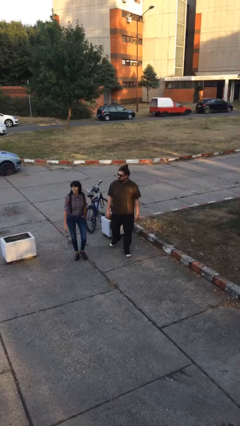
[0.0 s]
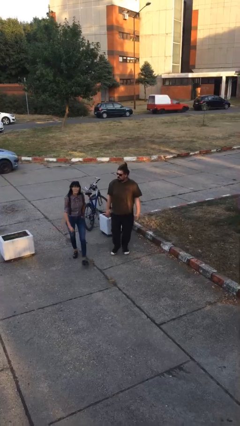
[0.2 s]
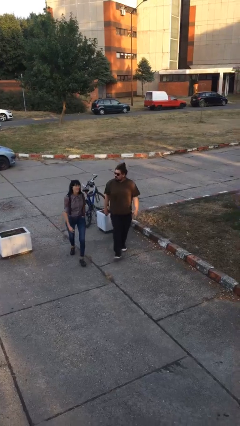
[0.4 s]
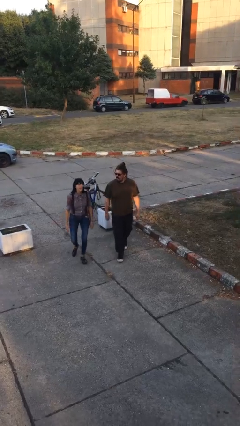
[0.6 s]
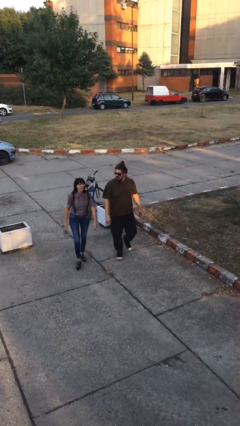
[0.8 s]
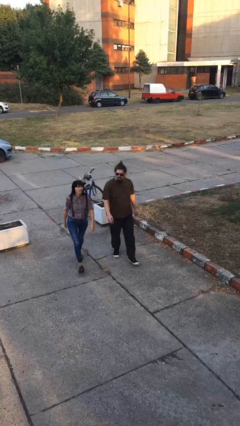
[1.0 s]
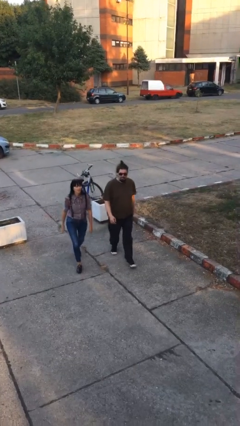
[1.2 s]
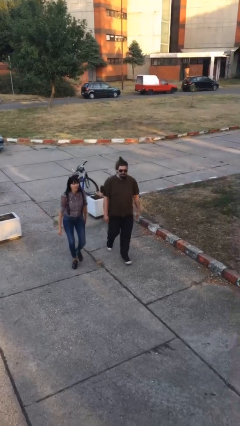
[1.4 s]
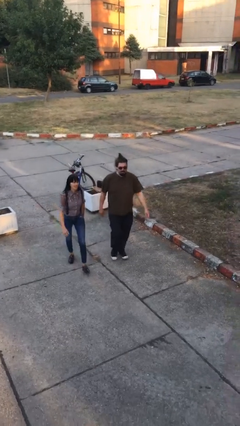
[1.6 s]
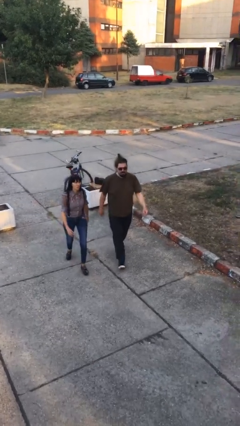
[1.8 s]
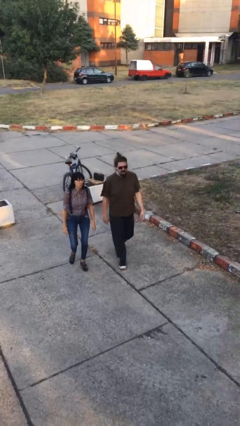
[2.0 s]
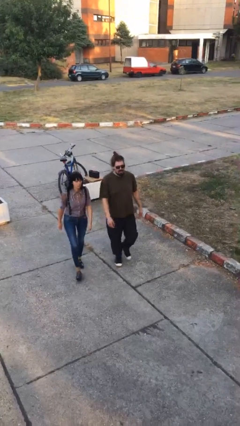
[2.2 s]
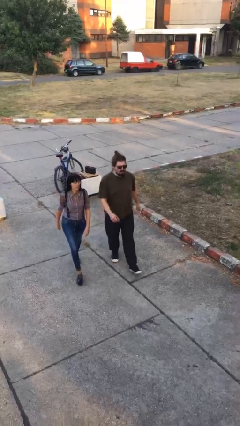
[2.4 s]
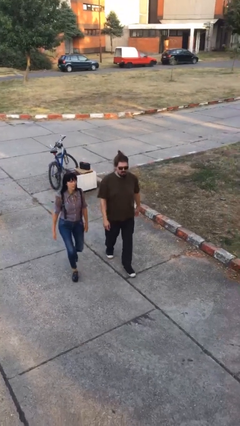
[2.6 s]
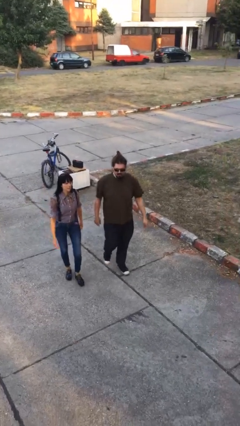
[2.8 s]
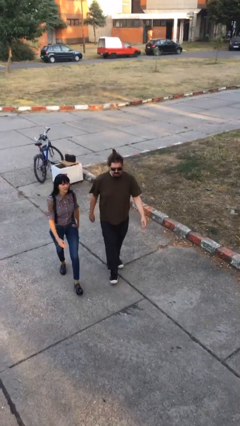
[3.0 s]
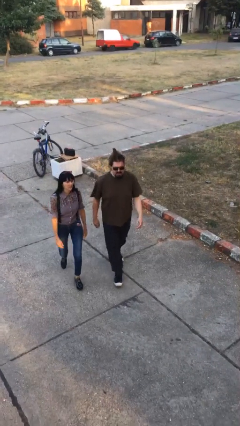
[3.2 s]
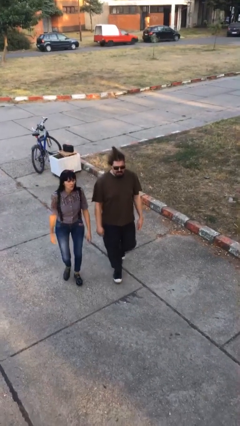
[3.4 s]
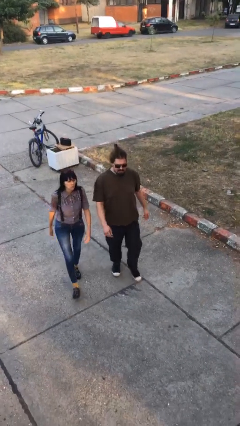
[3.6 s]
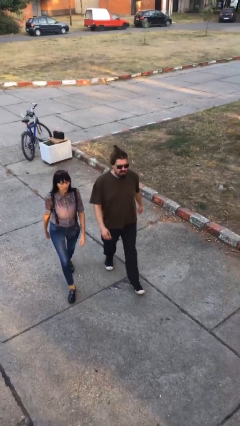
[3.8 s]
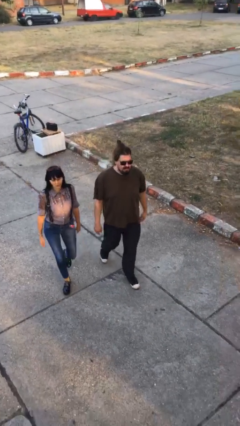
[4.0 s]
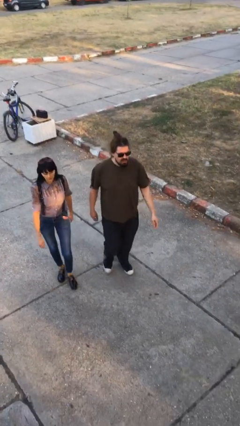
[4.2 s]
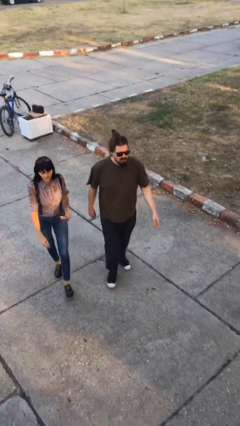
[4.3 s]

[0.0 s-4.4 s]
person talks to person

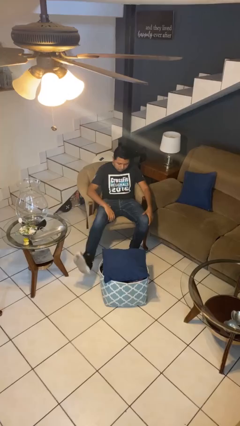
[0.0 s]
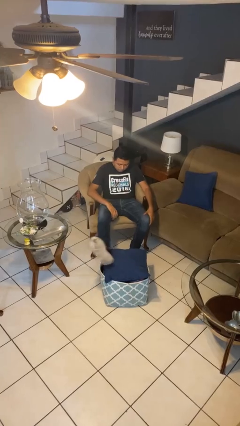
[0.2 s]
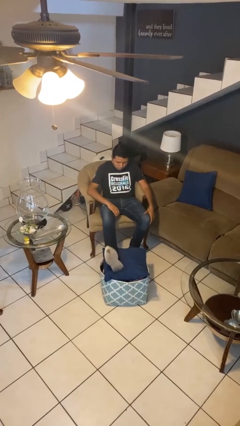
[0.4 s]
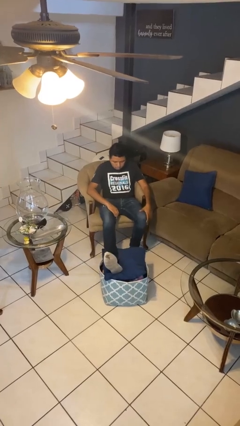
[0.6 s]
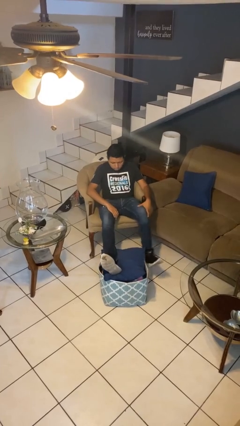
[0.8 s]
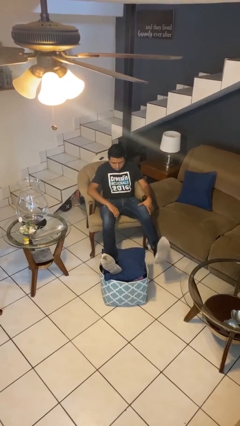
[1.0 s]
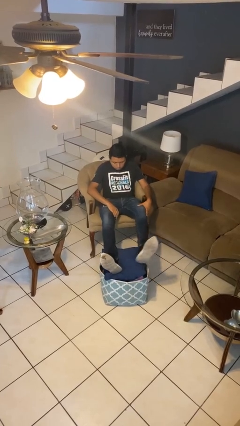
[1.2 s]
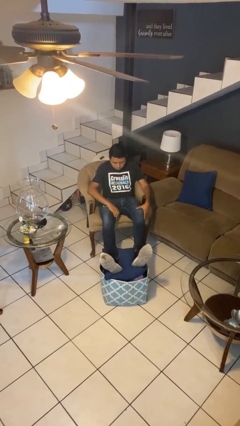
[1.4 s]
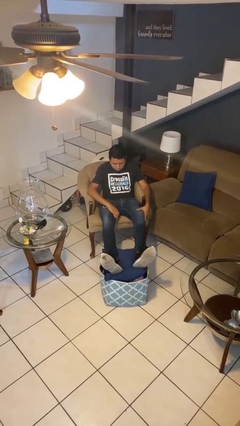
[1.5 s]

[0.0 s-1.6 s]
person puts feet up

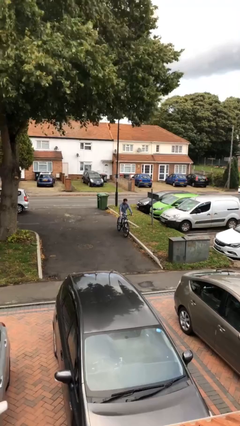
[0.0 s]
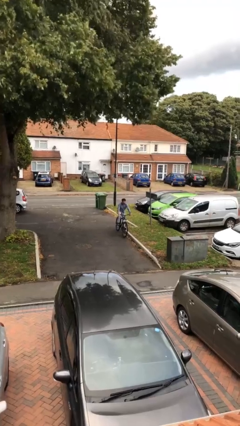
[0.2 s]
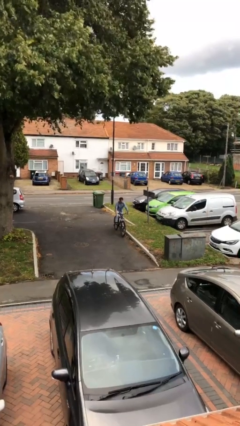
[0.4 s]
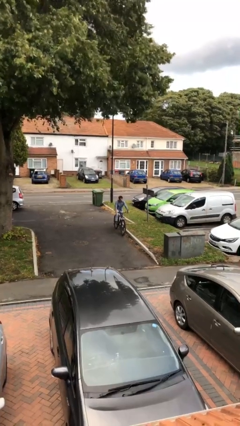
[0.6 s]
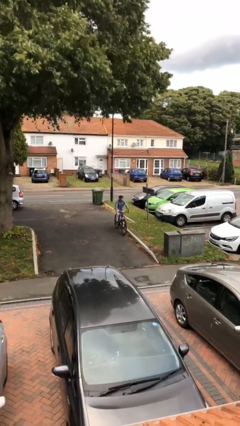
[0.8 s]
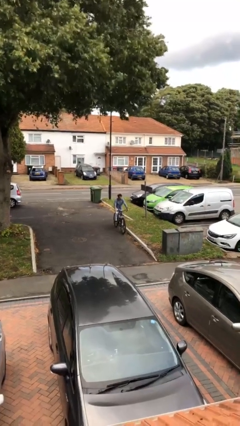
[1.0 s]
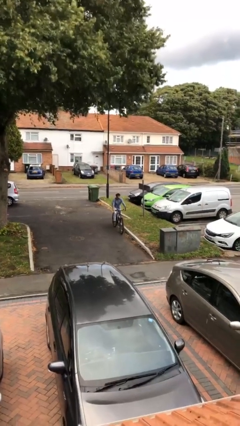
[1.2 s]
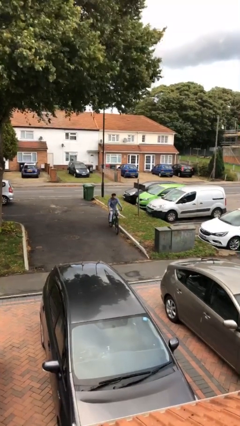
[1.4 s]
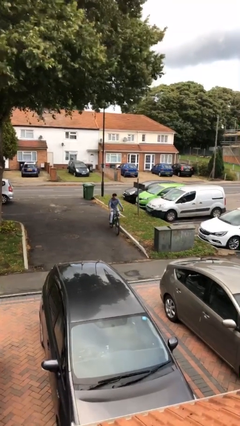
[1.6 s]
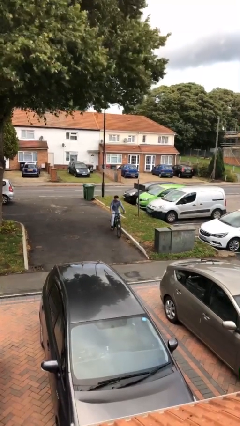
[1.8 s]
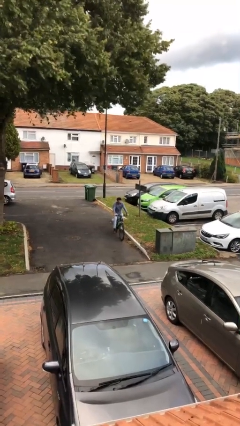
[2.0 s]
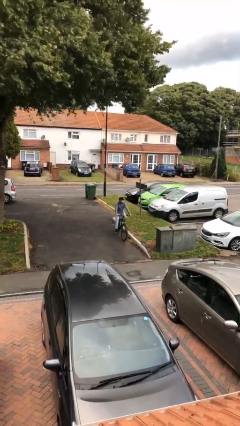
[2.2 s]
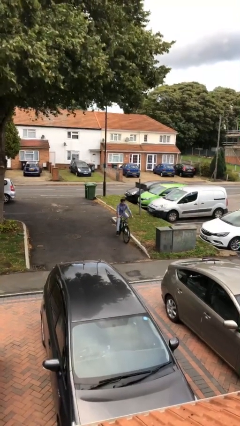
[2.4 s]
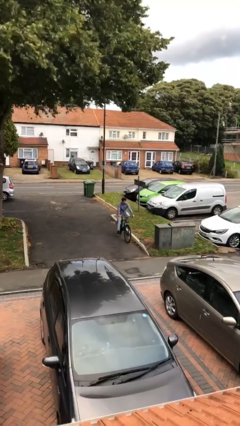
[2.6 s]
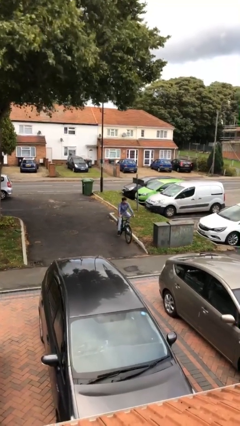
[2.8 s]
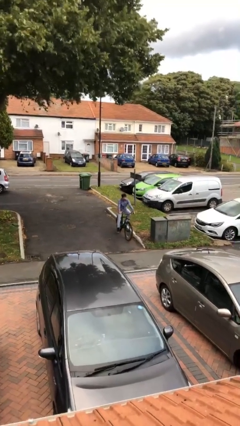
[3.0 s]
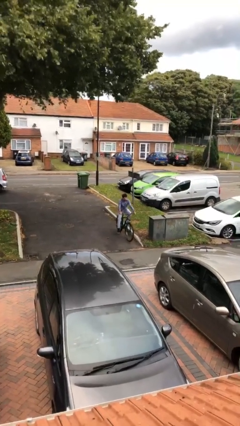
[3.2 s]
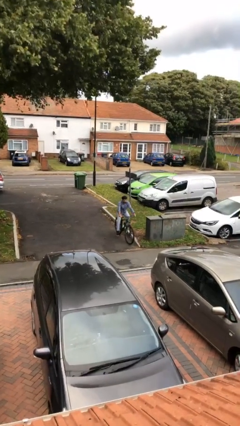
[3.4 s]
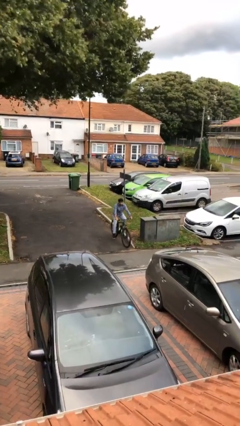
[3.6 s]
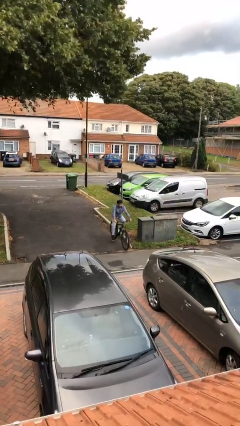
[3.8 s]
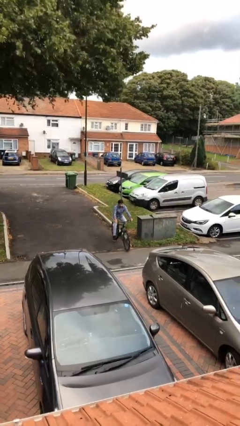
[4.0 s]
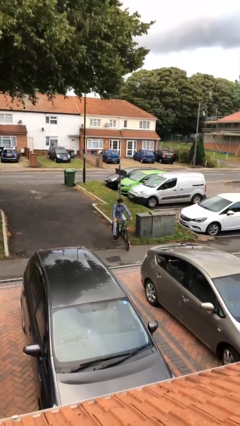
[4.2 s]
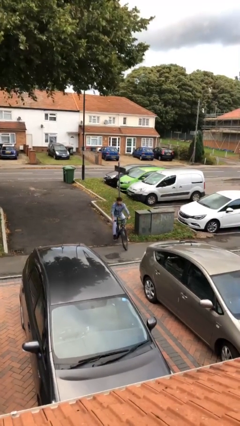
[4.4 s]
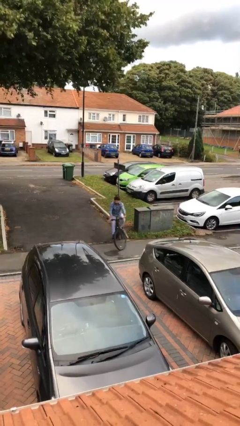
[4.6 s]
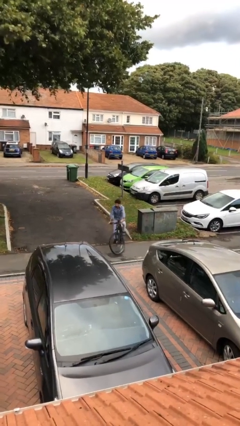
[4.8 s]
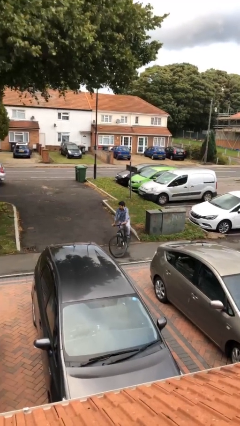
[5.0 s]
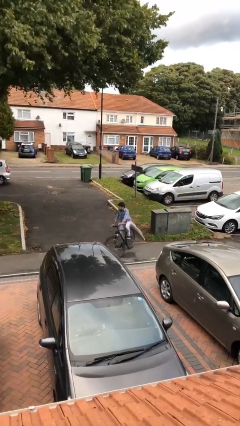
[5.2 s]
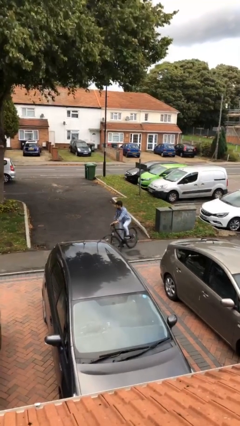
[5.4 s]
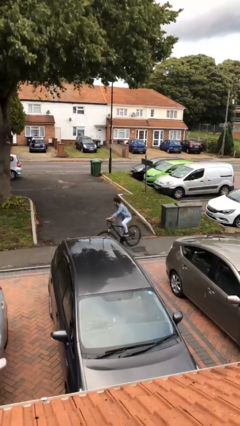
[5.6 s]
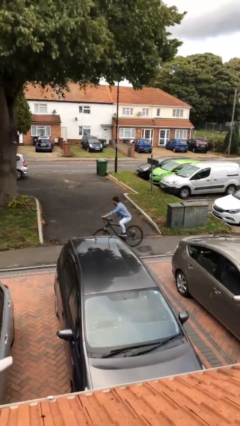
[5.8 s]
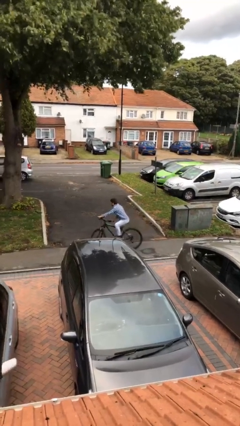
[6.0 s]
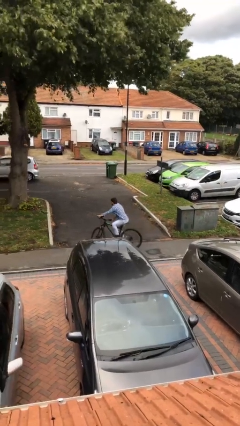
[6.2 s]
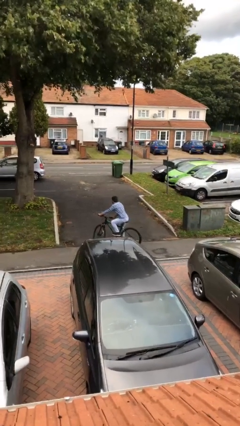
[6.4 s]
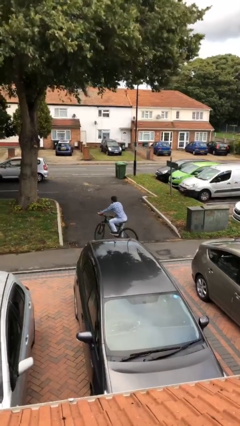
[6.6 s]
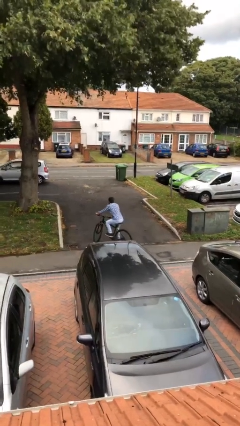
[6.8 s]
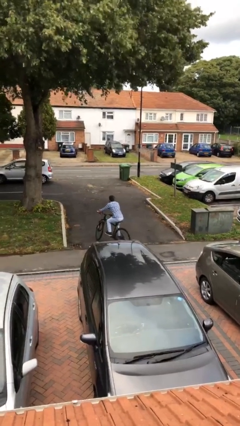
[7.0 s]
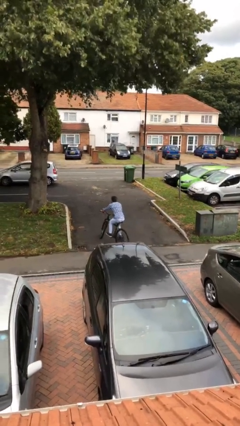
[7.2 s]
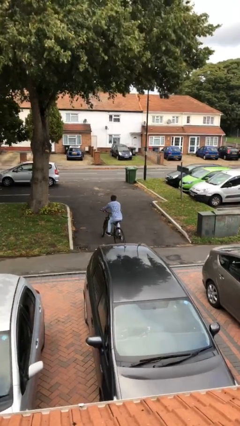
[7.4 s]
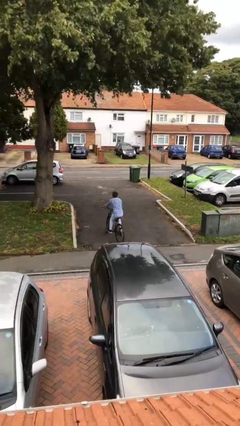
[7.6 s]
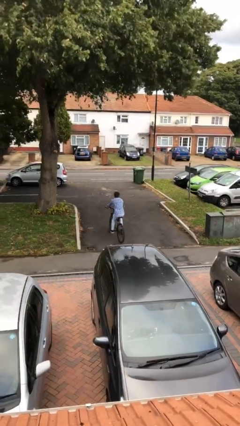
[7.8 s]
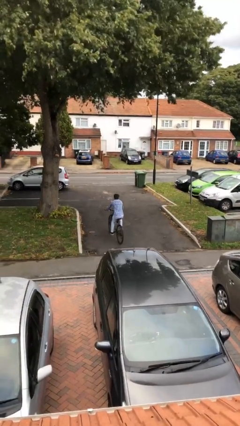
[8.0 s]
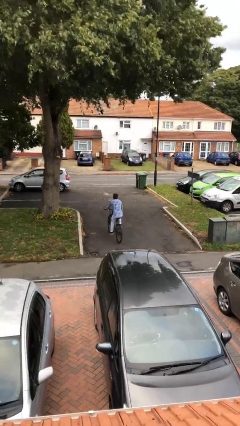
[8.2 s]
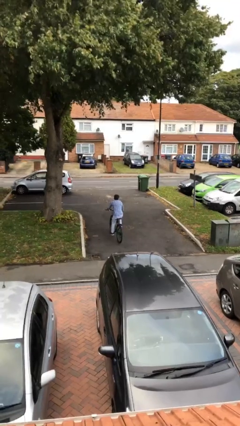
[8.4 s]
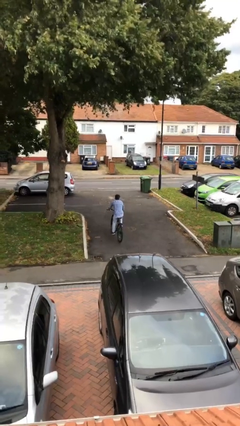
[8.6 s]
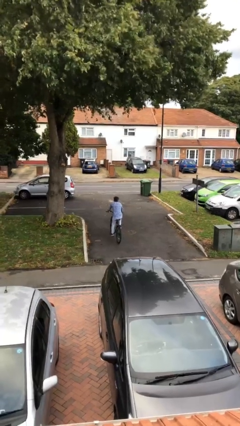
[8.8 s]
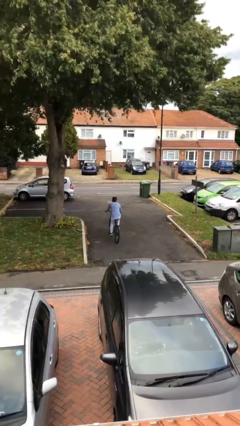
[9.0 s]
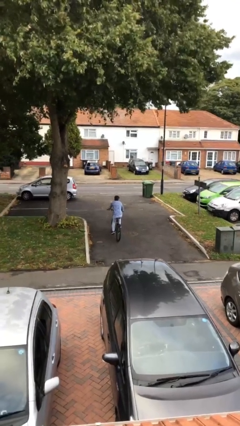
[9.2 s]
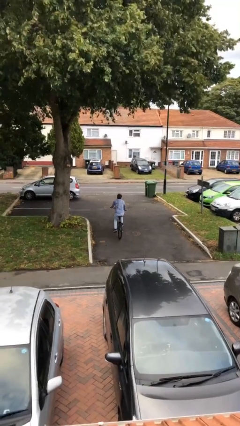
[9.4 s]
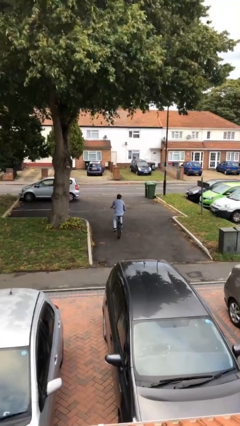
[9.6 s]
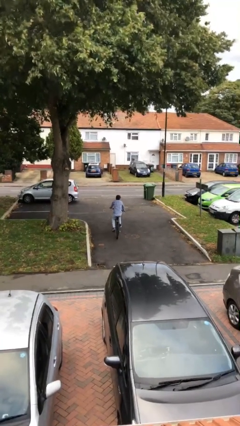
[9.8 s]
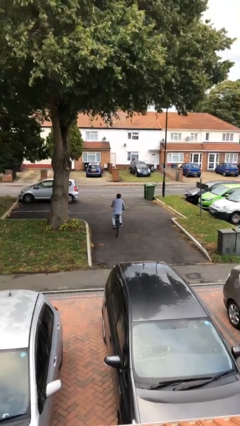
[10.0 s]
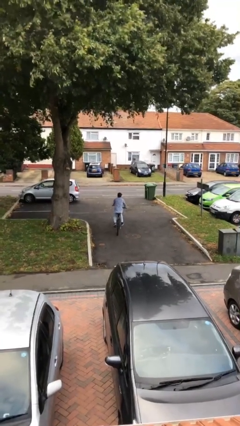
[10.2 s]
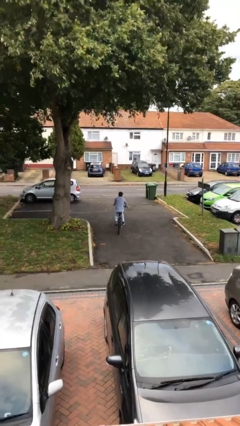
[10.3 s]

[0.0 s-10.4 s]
person rides bicycle

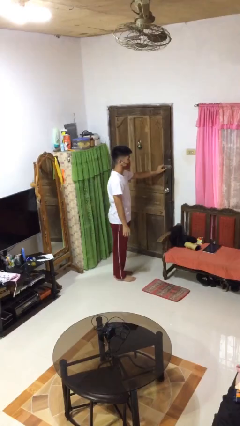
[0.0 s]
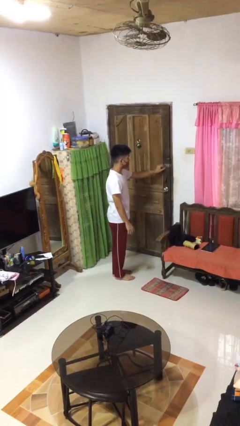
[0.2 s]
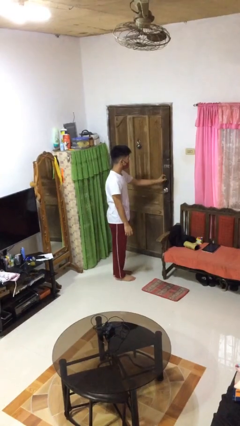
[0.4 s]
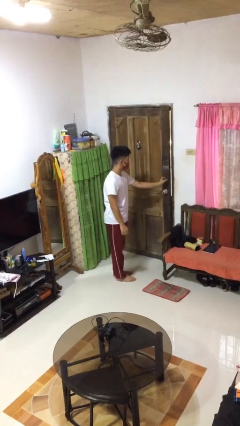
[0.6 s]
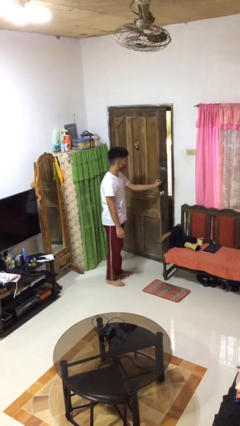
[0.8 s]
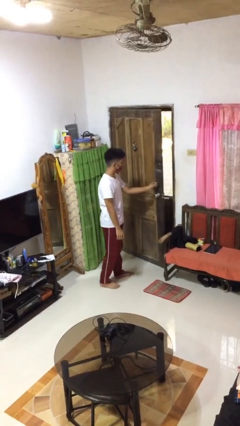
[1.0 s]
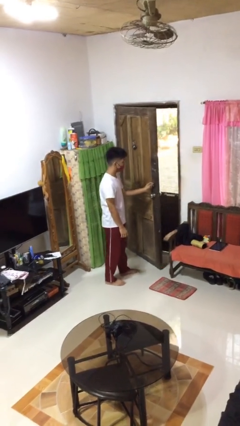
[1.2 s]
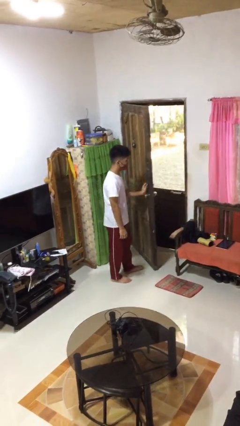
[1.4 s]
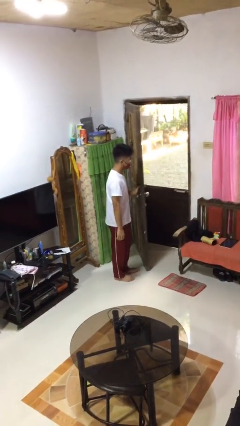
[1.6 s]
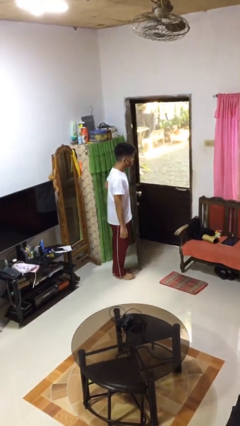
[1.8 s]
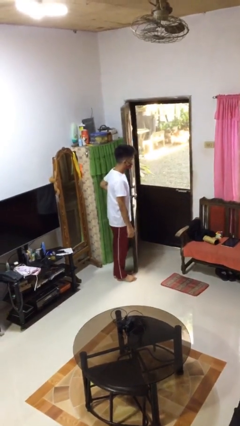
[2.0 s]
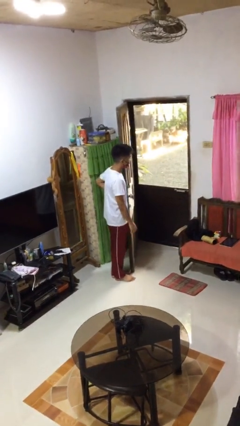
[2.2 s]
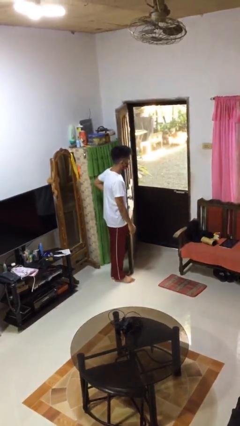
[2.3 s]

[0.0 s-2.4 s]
person opens facility door
